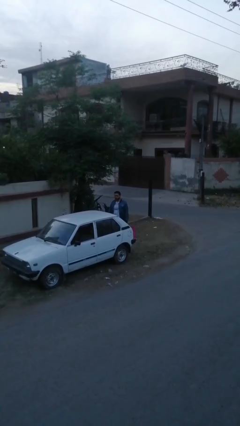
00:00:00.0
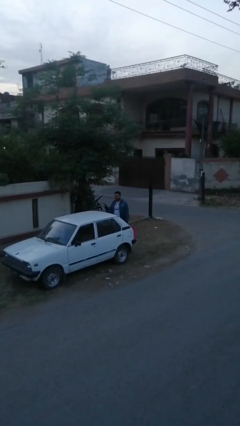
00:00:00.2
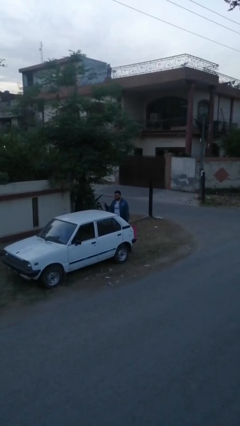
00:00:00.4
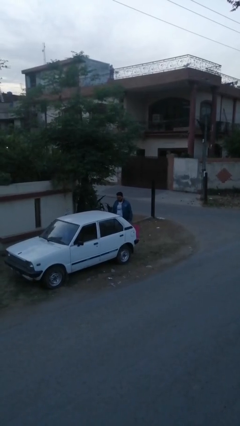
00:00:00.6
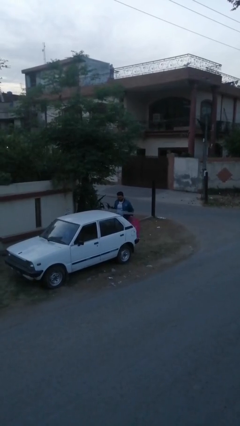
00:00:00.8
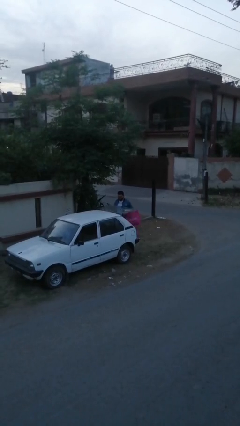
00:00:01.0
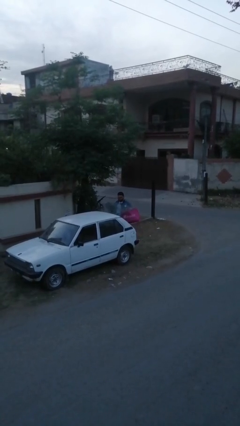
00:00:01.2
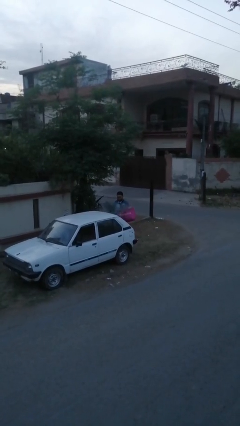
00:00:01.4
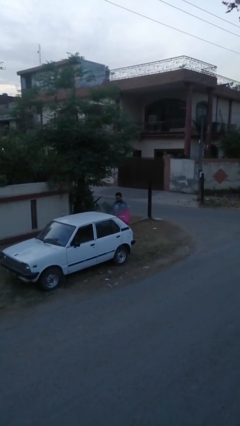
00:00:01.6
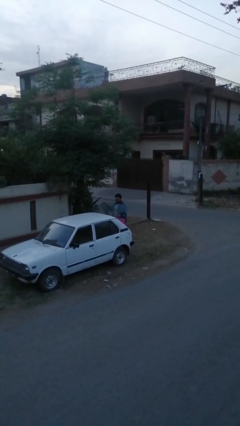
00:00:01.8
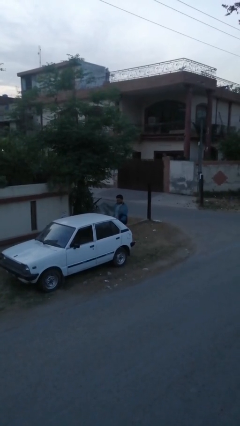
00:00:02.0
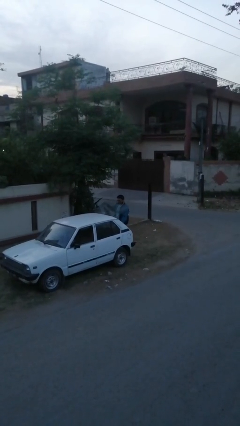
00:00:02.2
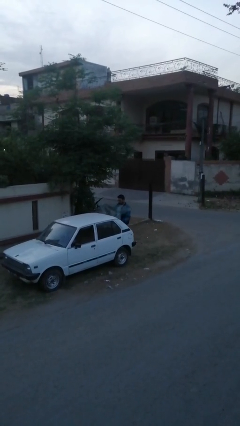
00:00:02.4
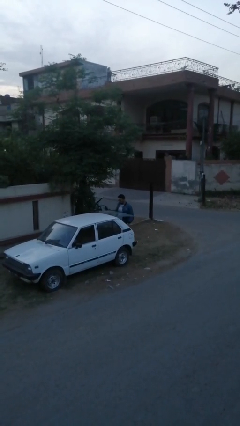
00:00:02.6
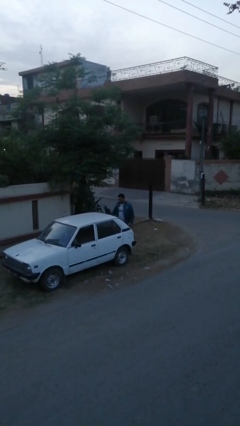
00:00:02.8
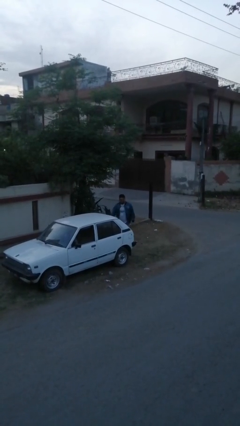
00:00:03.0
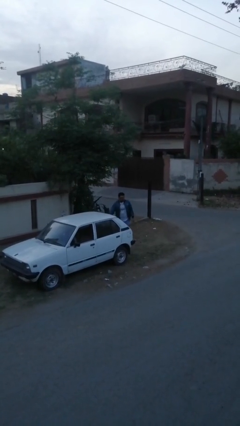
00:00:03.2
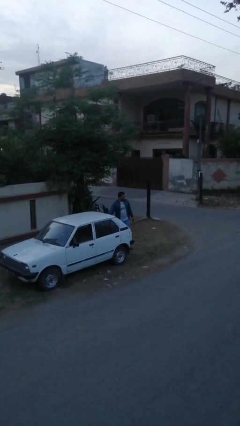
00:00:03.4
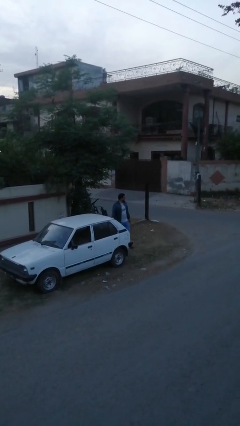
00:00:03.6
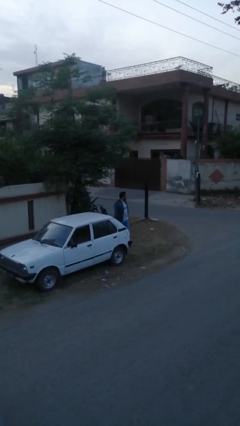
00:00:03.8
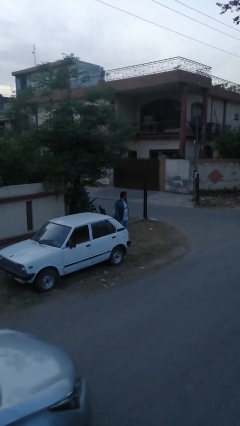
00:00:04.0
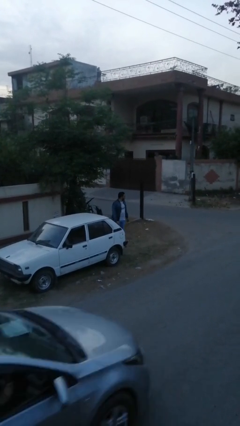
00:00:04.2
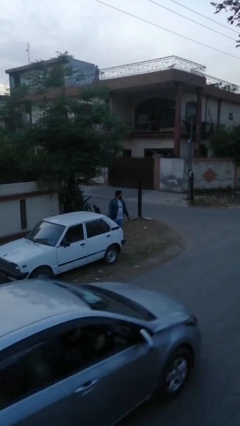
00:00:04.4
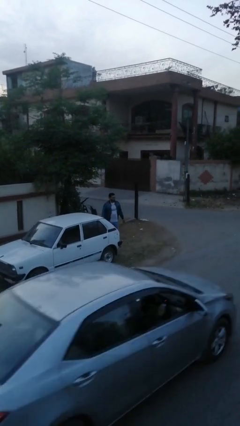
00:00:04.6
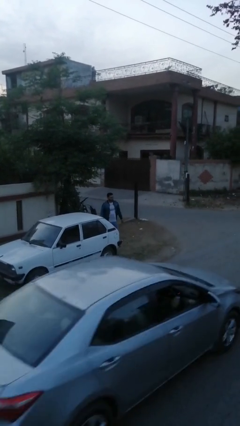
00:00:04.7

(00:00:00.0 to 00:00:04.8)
person loads car

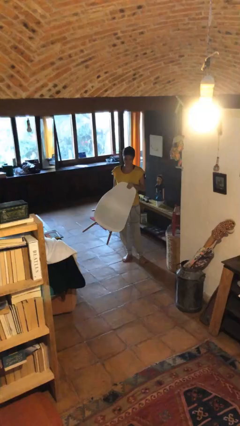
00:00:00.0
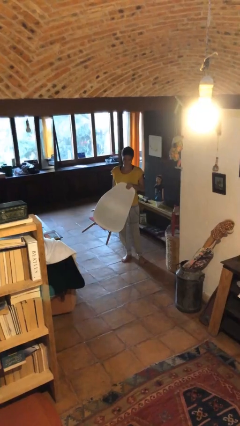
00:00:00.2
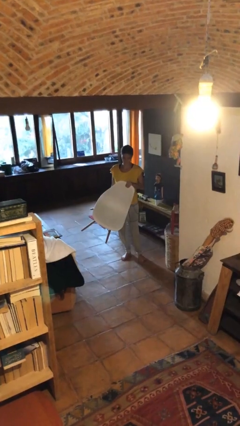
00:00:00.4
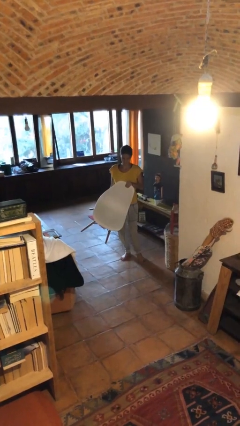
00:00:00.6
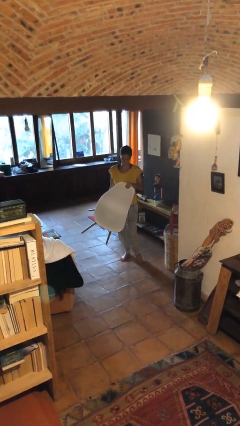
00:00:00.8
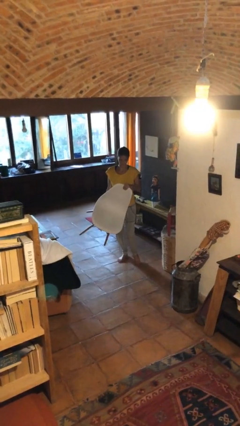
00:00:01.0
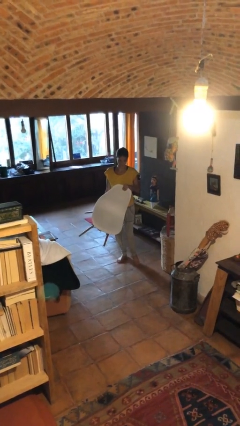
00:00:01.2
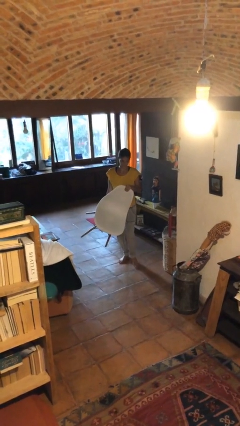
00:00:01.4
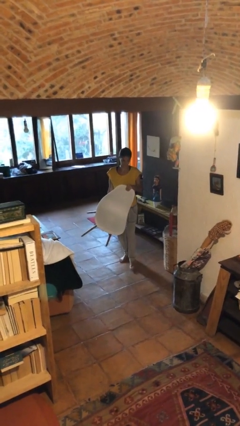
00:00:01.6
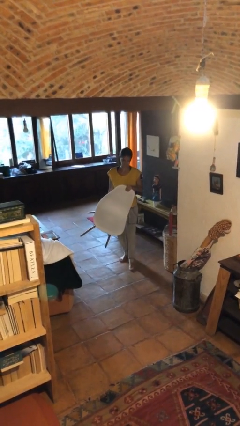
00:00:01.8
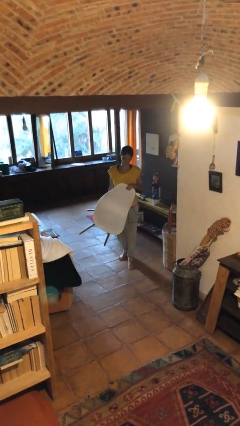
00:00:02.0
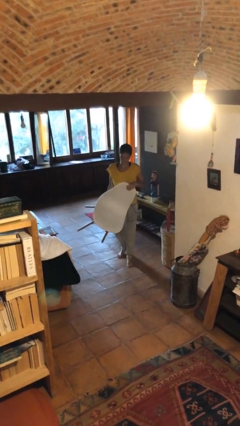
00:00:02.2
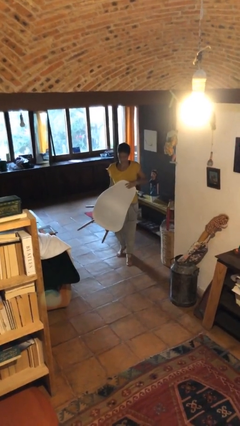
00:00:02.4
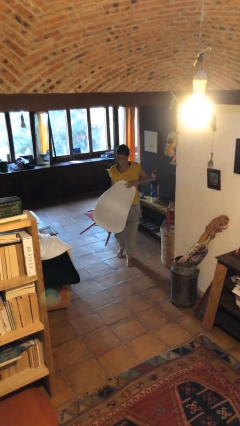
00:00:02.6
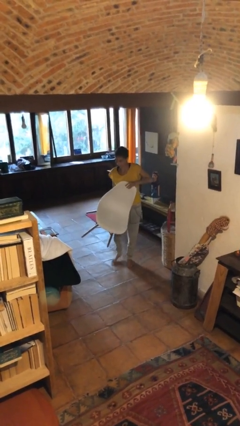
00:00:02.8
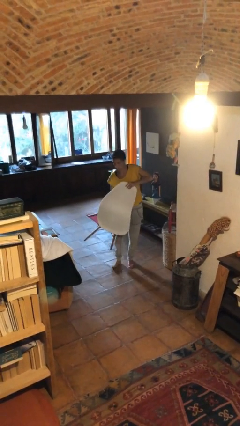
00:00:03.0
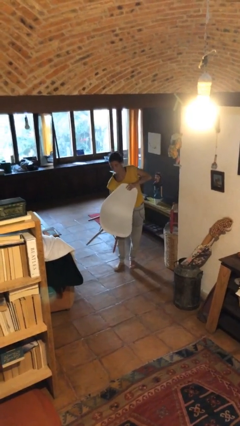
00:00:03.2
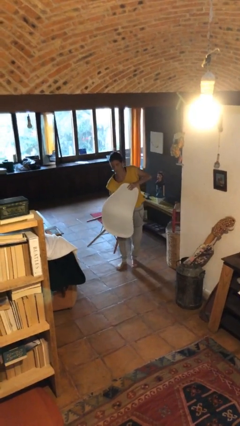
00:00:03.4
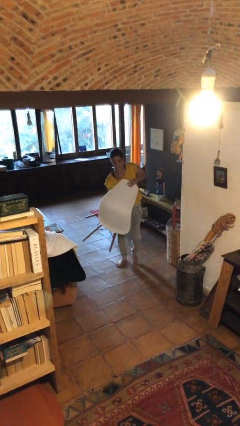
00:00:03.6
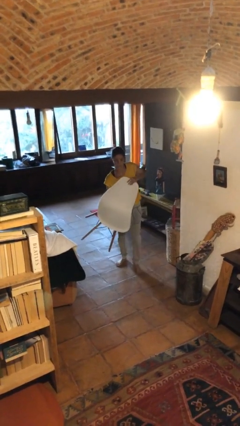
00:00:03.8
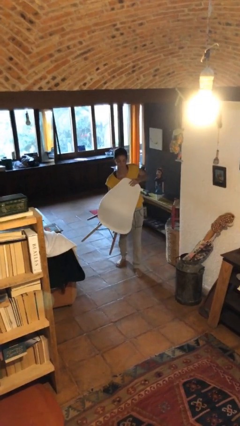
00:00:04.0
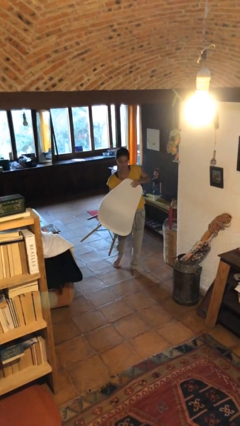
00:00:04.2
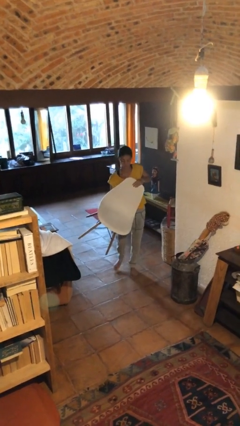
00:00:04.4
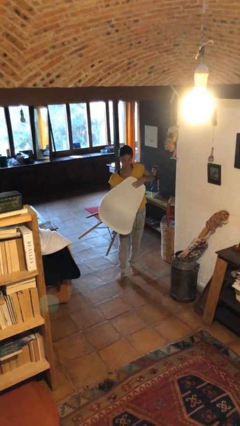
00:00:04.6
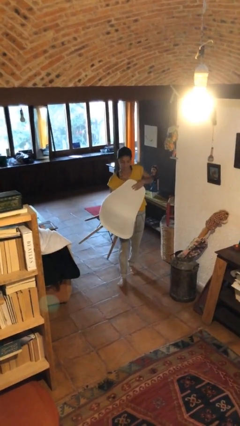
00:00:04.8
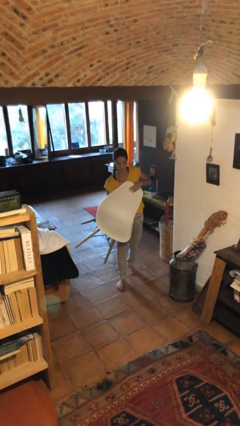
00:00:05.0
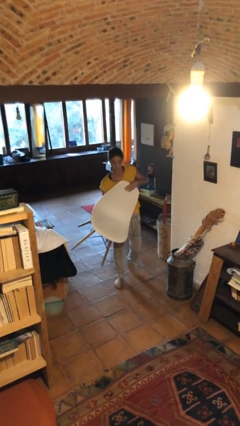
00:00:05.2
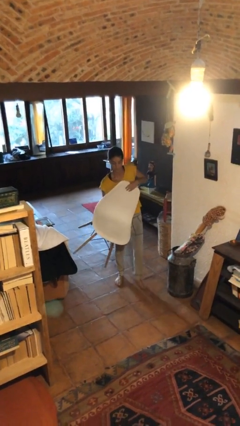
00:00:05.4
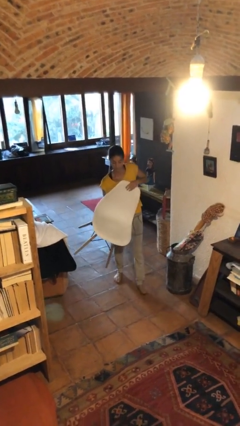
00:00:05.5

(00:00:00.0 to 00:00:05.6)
person carries heavy object

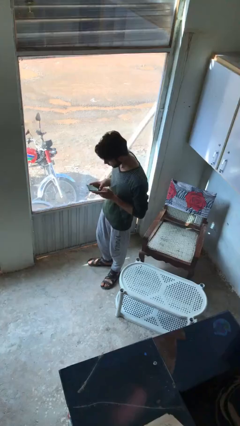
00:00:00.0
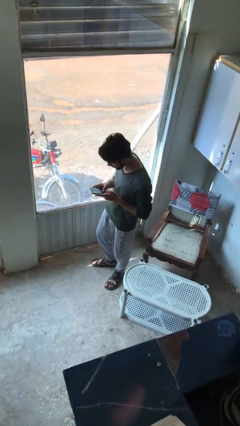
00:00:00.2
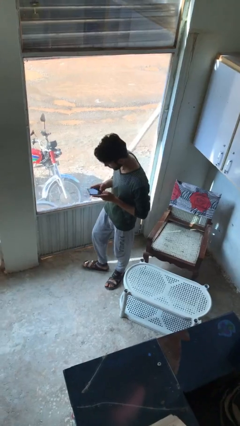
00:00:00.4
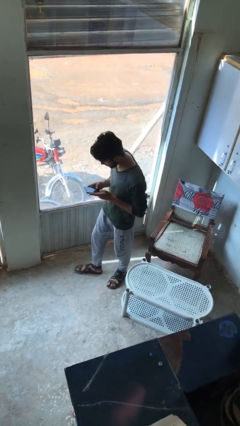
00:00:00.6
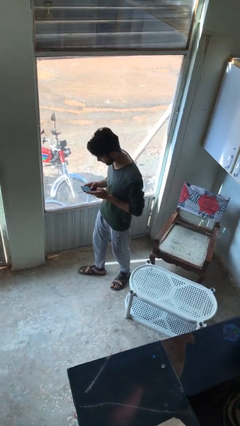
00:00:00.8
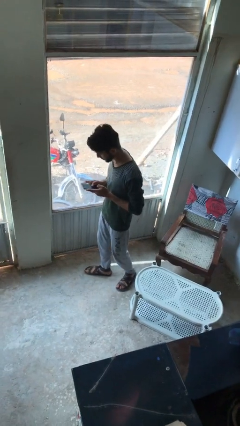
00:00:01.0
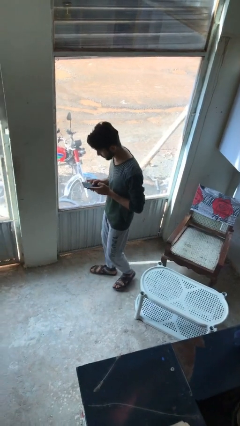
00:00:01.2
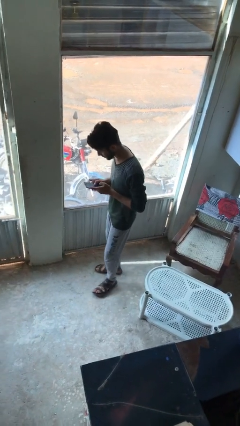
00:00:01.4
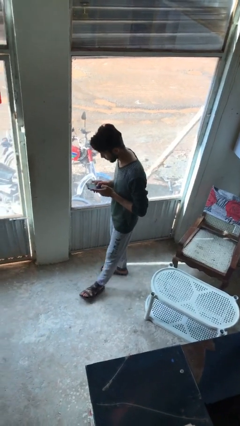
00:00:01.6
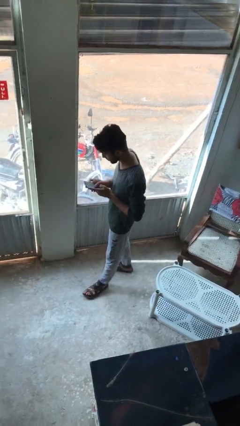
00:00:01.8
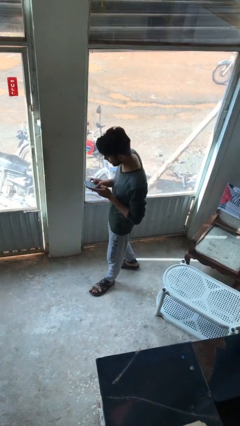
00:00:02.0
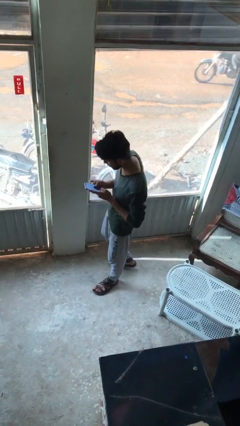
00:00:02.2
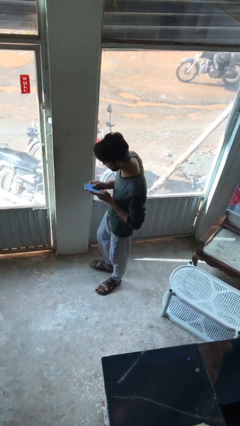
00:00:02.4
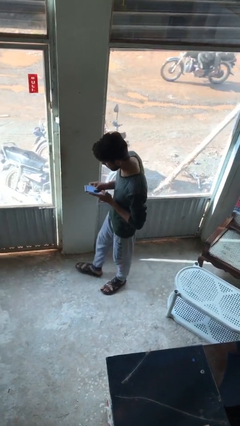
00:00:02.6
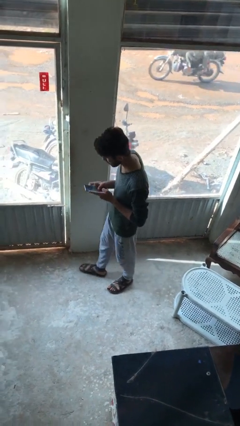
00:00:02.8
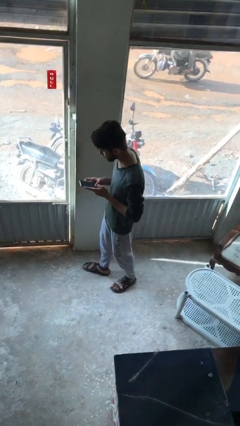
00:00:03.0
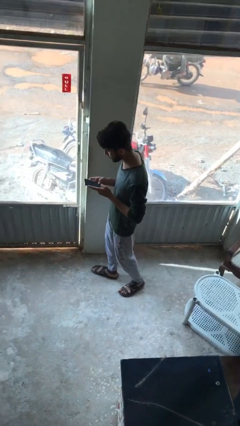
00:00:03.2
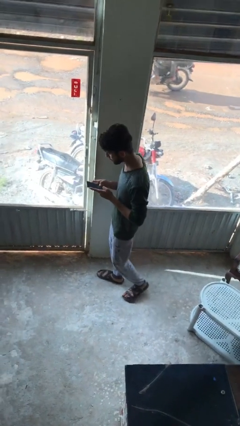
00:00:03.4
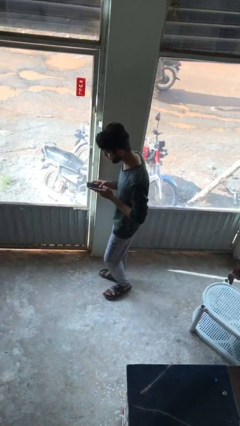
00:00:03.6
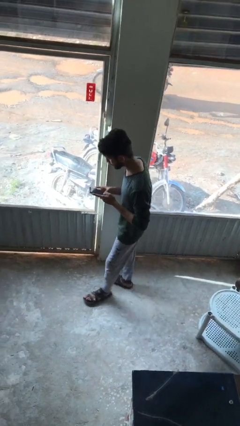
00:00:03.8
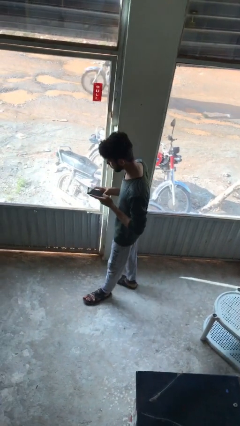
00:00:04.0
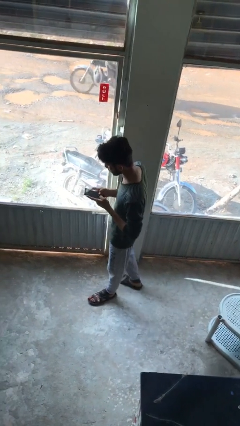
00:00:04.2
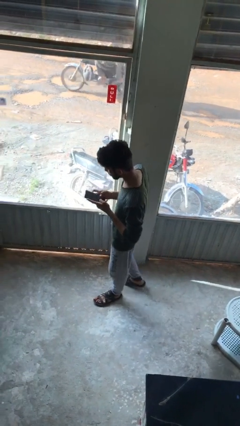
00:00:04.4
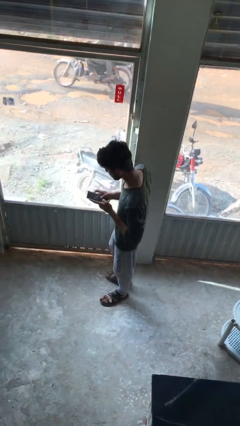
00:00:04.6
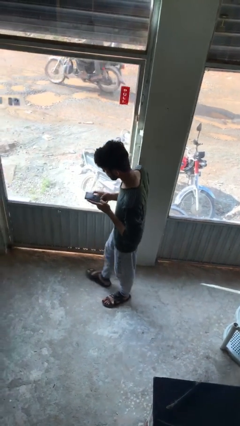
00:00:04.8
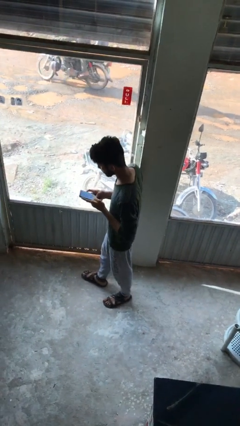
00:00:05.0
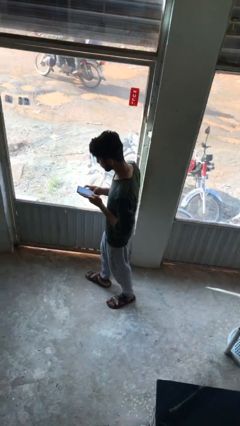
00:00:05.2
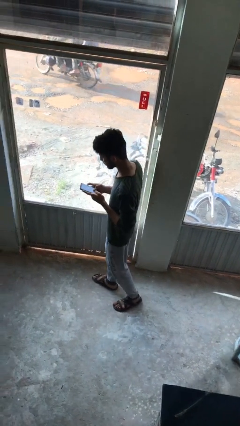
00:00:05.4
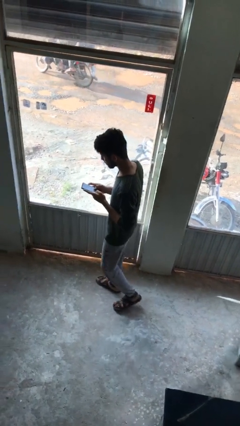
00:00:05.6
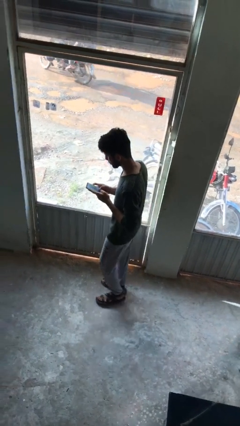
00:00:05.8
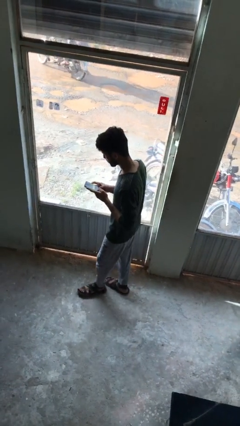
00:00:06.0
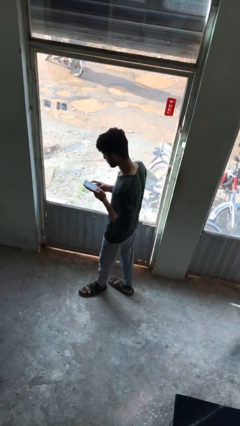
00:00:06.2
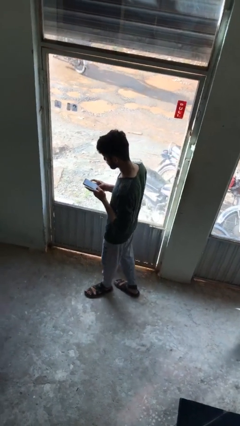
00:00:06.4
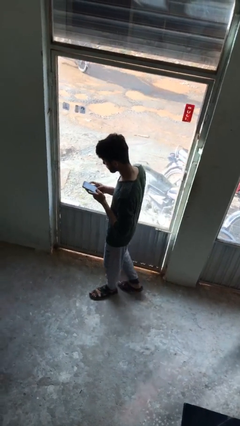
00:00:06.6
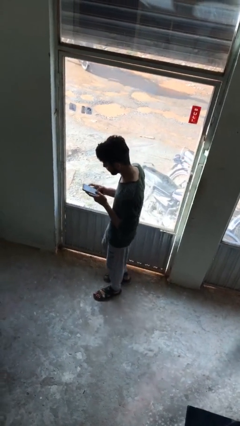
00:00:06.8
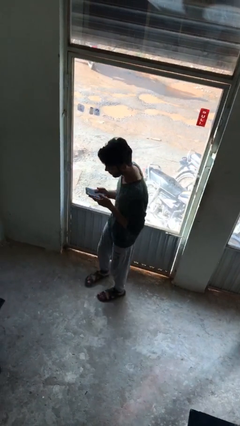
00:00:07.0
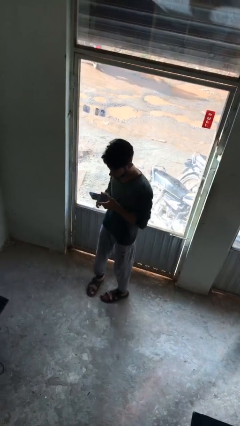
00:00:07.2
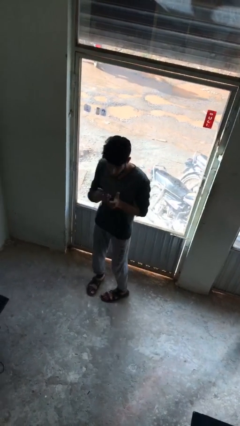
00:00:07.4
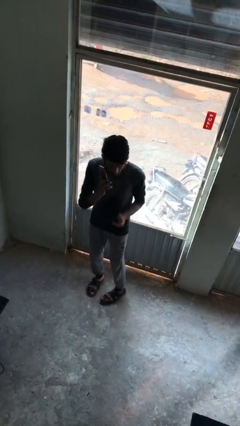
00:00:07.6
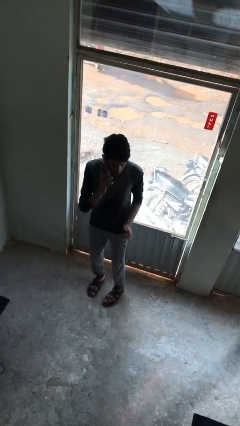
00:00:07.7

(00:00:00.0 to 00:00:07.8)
person texts on phone
